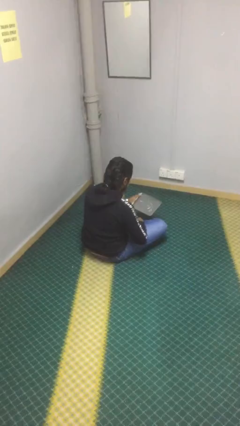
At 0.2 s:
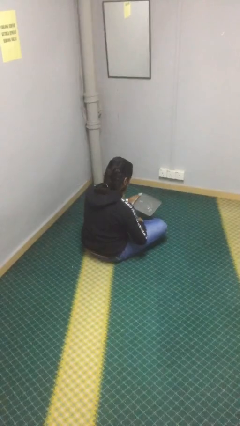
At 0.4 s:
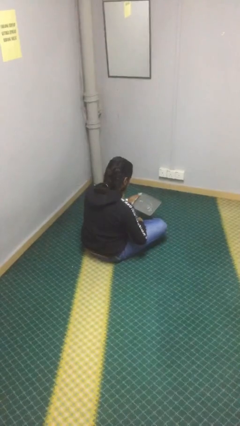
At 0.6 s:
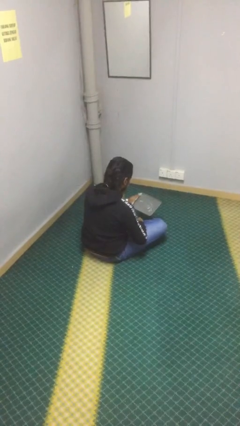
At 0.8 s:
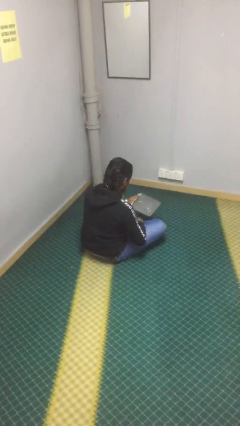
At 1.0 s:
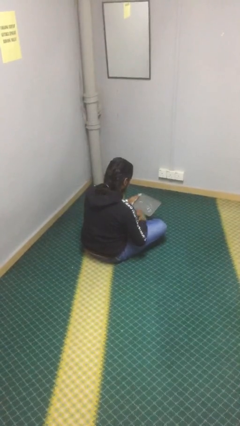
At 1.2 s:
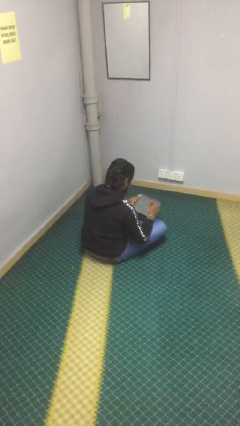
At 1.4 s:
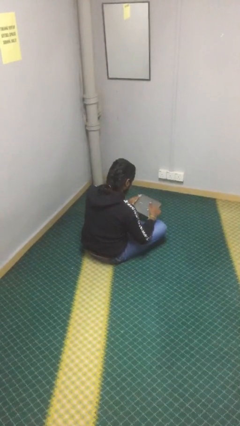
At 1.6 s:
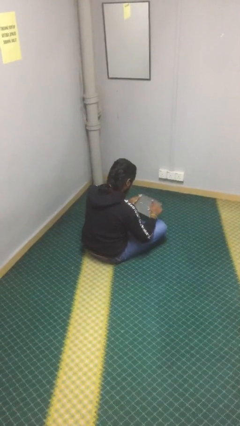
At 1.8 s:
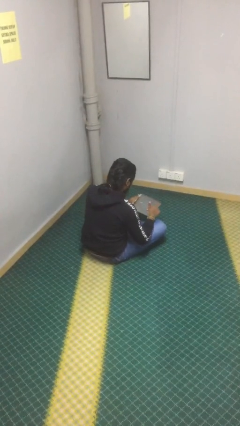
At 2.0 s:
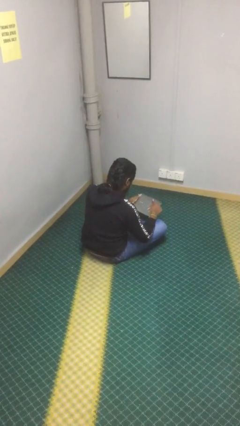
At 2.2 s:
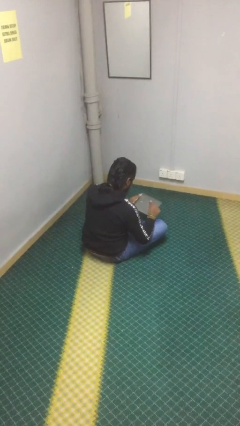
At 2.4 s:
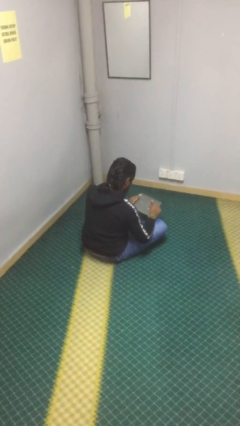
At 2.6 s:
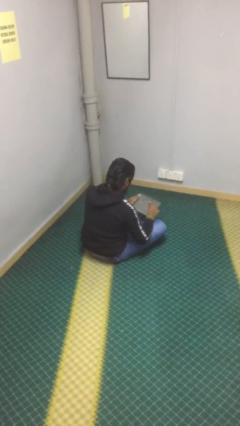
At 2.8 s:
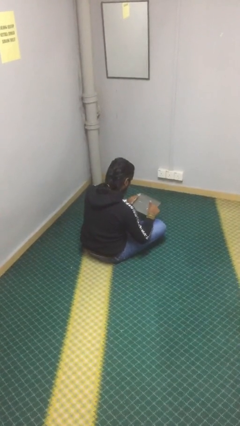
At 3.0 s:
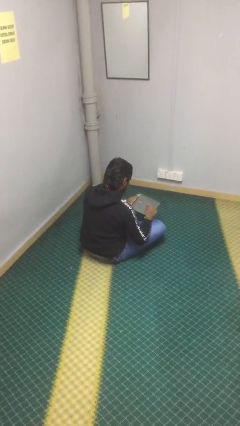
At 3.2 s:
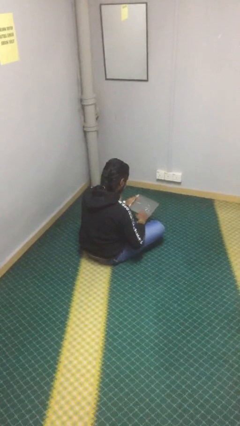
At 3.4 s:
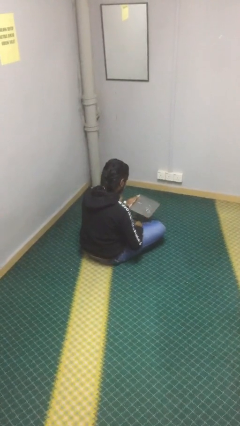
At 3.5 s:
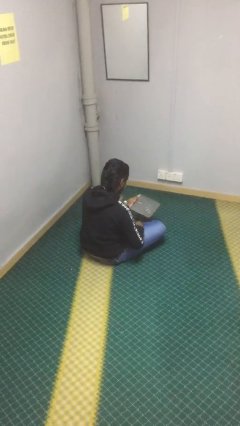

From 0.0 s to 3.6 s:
person interacts with tablet

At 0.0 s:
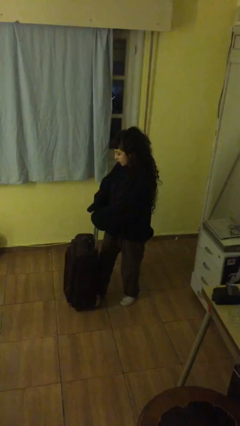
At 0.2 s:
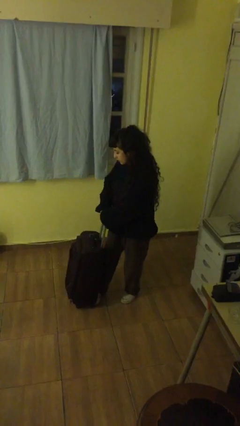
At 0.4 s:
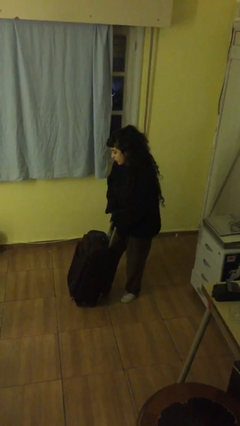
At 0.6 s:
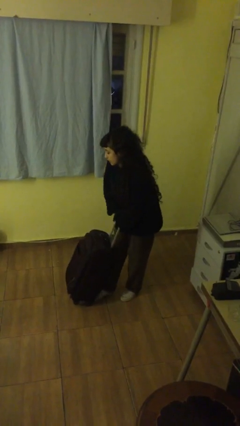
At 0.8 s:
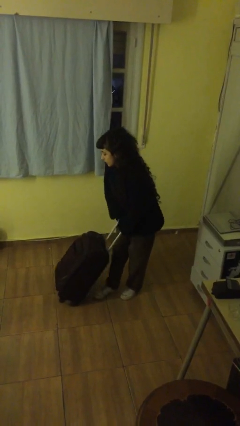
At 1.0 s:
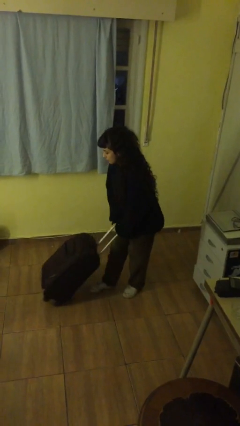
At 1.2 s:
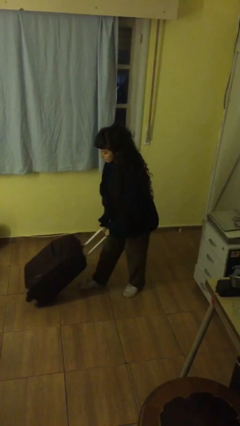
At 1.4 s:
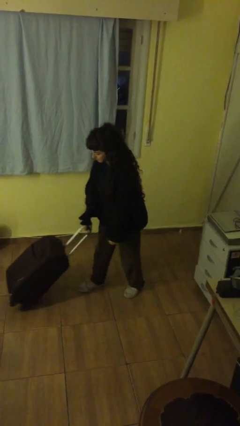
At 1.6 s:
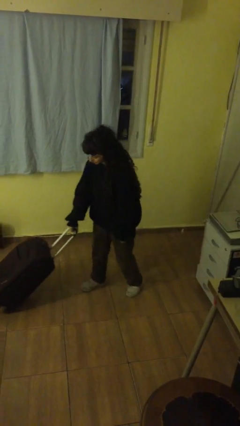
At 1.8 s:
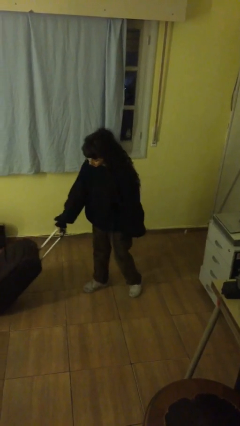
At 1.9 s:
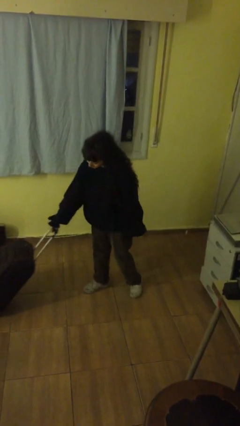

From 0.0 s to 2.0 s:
person pushes wheeled cart

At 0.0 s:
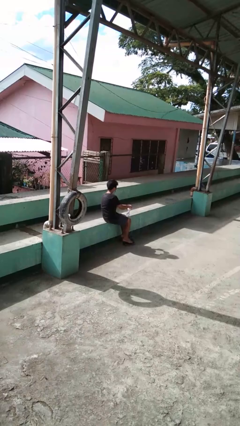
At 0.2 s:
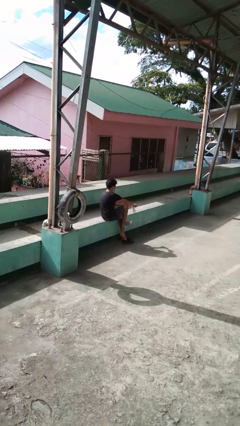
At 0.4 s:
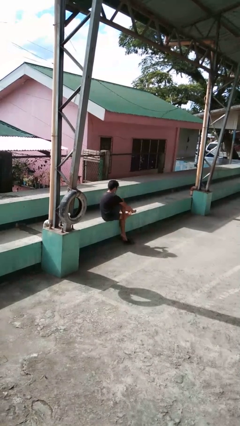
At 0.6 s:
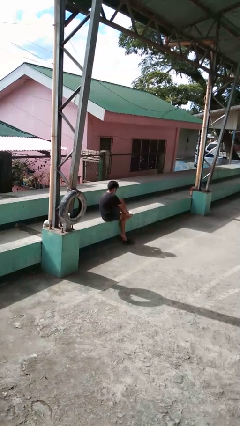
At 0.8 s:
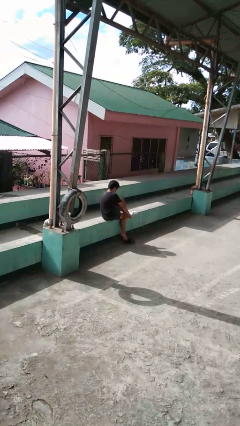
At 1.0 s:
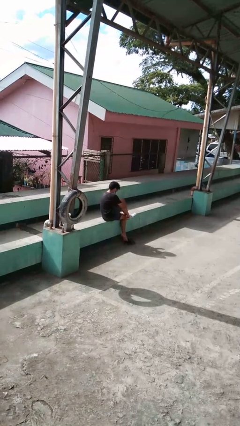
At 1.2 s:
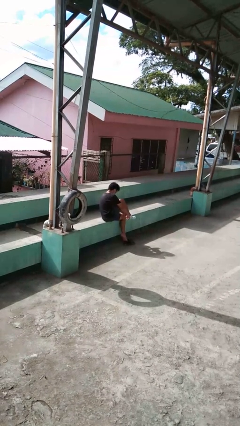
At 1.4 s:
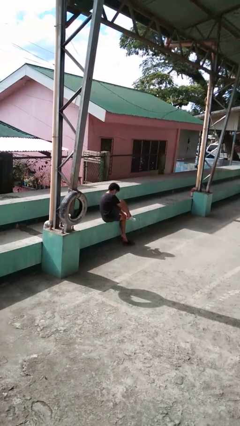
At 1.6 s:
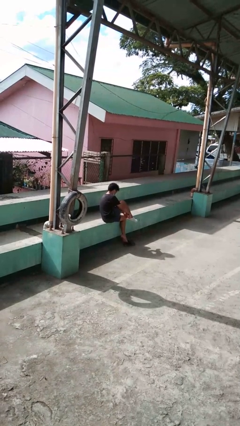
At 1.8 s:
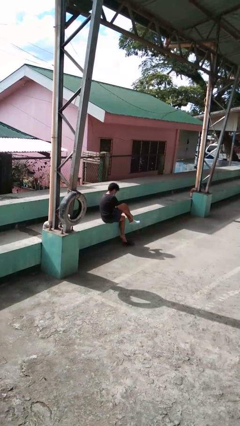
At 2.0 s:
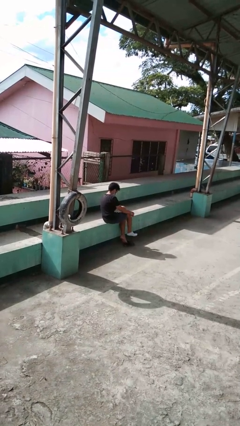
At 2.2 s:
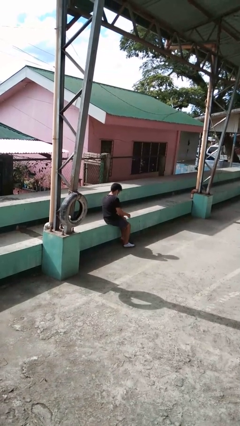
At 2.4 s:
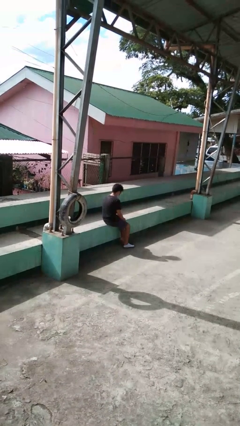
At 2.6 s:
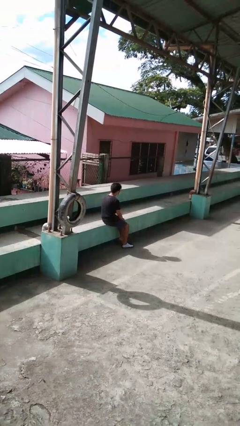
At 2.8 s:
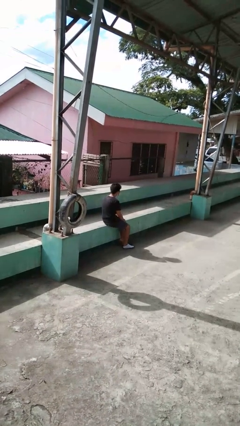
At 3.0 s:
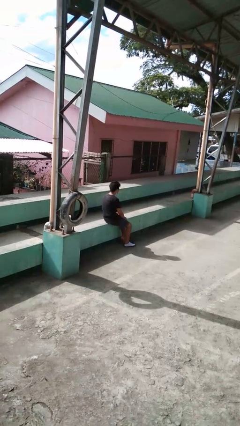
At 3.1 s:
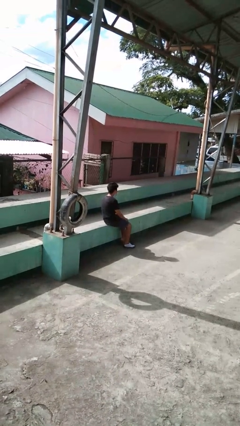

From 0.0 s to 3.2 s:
person puts on socks

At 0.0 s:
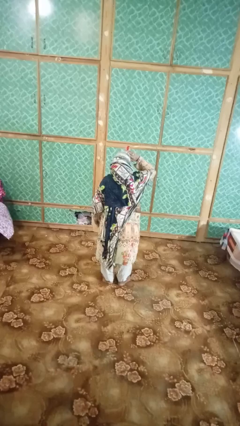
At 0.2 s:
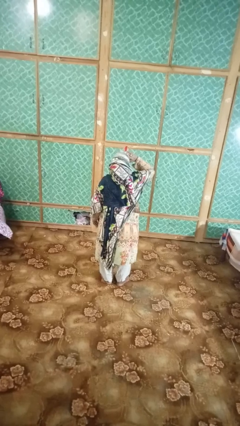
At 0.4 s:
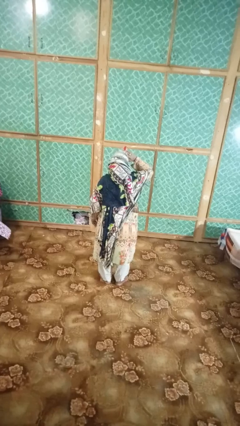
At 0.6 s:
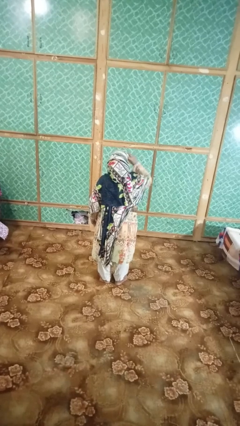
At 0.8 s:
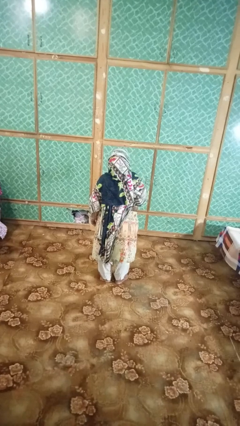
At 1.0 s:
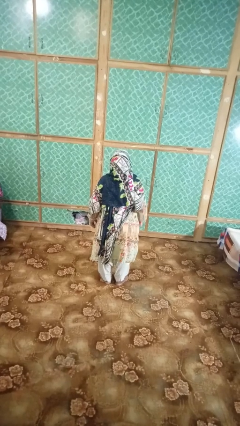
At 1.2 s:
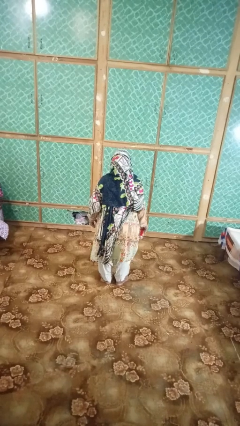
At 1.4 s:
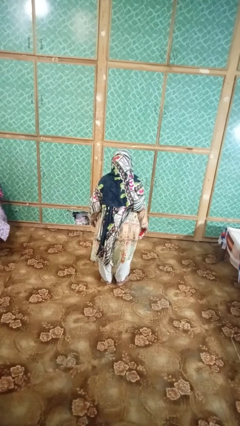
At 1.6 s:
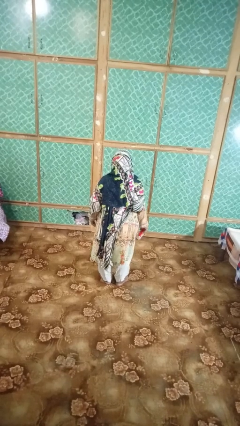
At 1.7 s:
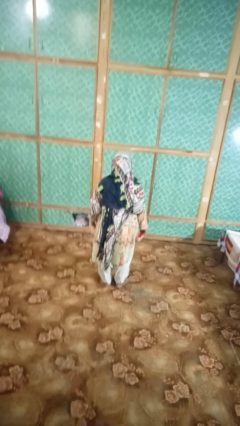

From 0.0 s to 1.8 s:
person drinks from beverage can

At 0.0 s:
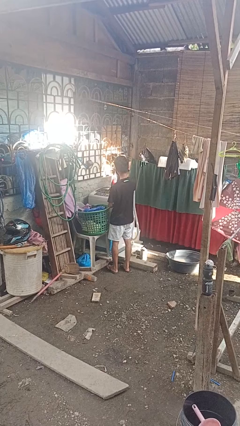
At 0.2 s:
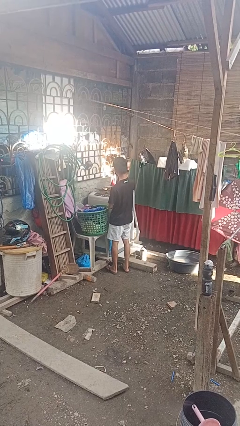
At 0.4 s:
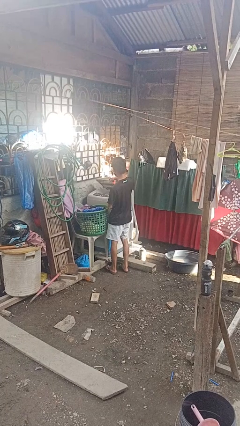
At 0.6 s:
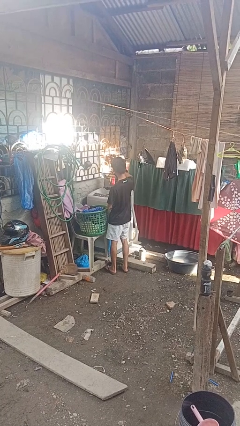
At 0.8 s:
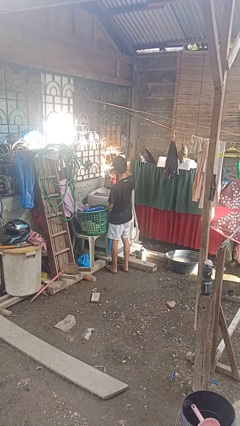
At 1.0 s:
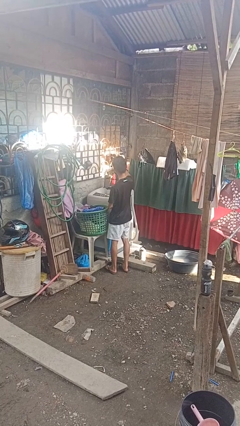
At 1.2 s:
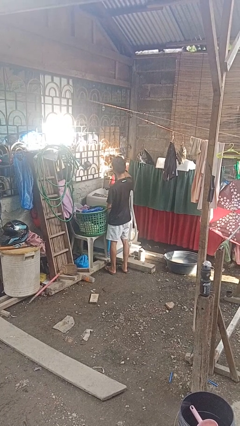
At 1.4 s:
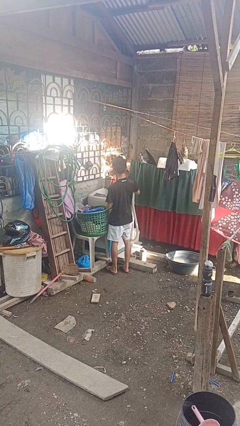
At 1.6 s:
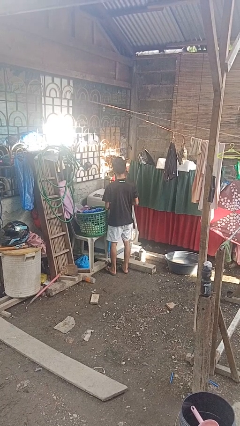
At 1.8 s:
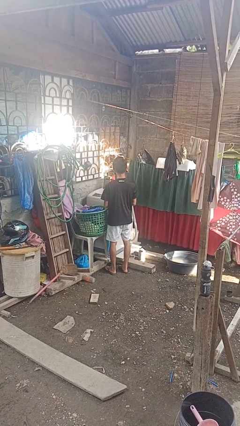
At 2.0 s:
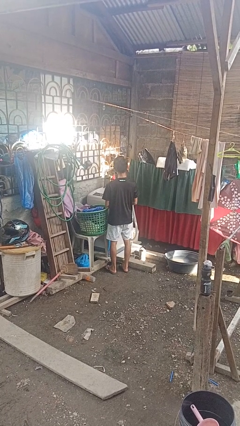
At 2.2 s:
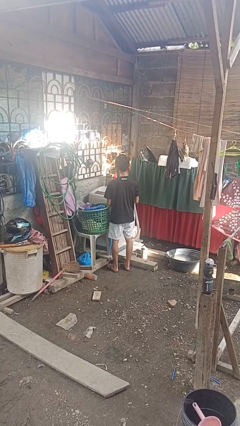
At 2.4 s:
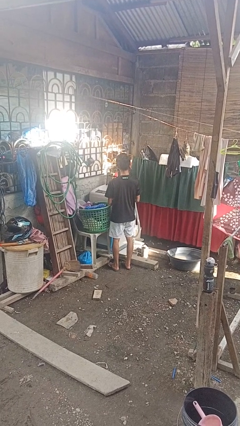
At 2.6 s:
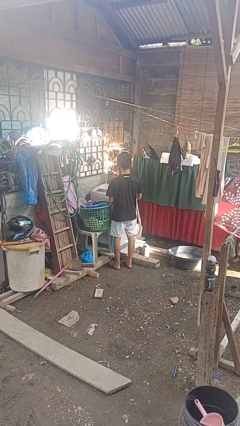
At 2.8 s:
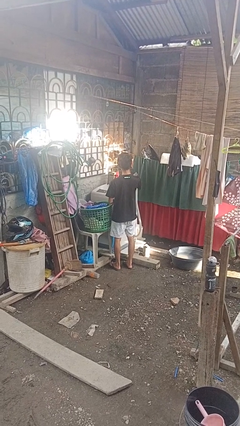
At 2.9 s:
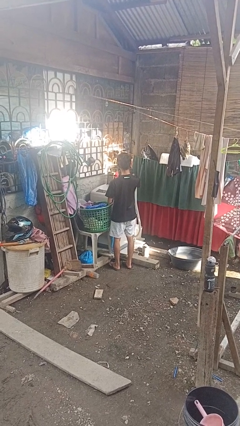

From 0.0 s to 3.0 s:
person opens clothes washer

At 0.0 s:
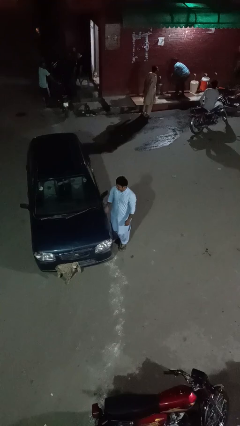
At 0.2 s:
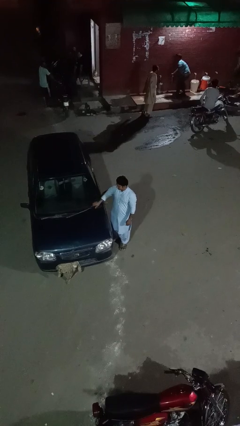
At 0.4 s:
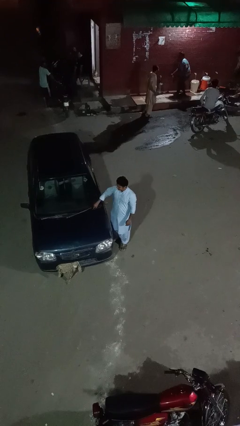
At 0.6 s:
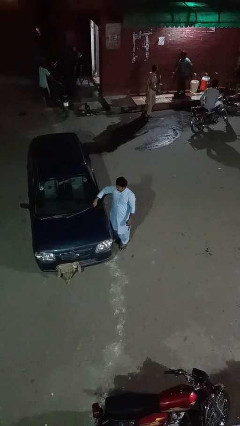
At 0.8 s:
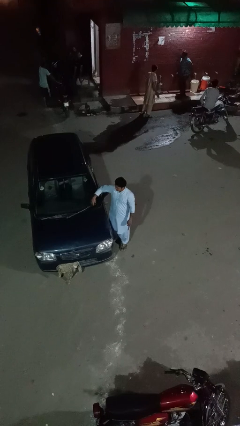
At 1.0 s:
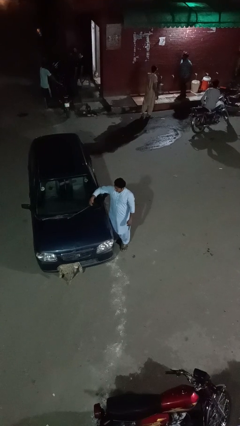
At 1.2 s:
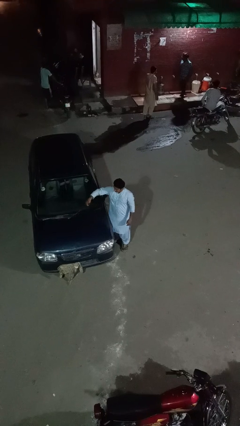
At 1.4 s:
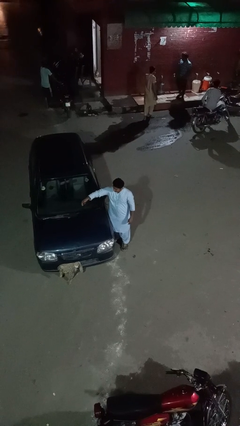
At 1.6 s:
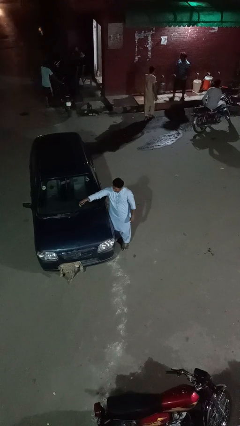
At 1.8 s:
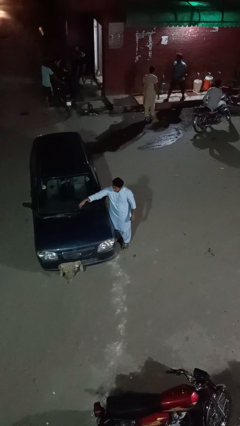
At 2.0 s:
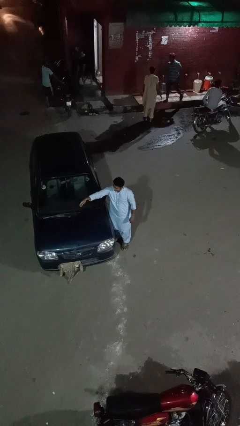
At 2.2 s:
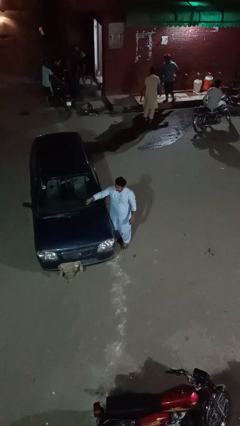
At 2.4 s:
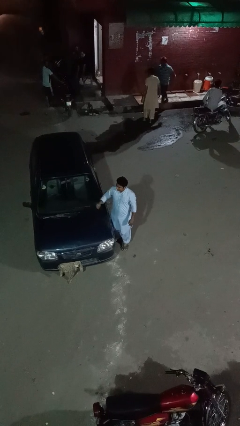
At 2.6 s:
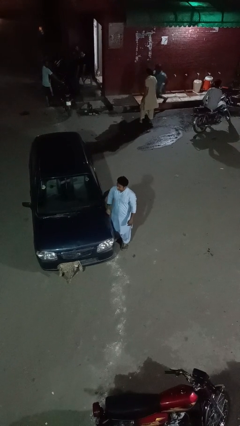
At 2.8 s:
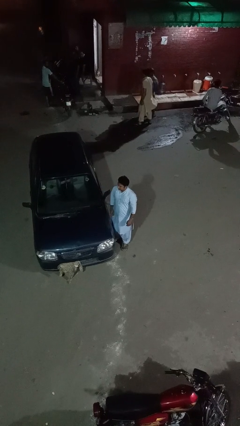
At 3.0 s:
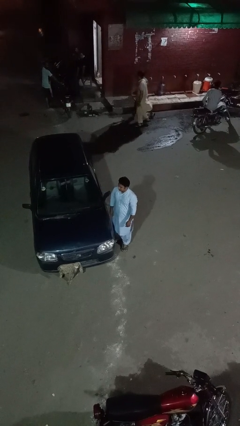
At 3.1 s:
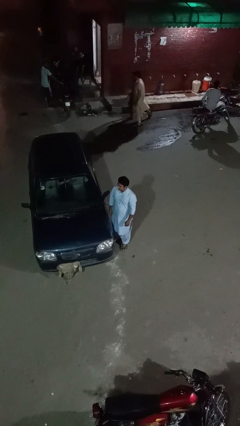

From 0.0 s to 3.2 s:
person flips up car wipers

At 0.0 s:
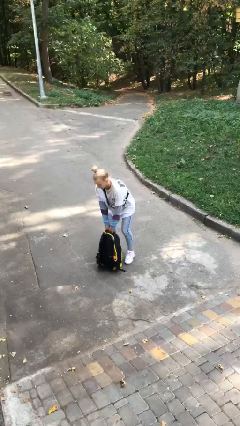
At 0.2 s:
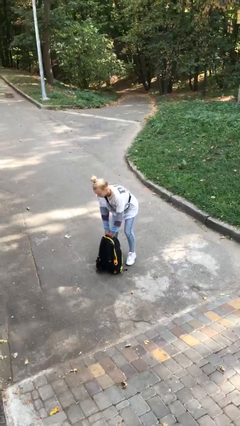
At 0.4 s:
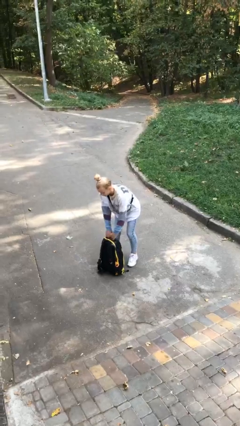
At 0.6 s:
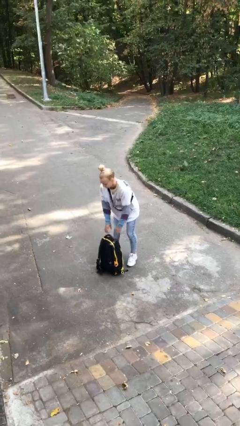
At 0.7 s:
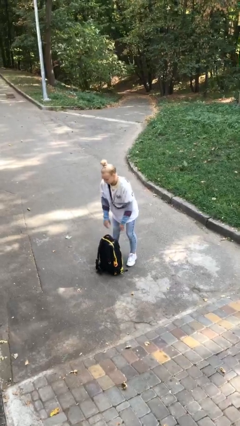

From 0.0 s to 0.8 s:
person puts down object on floor
